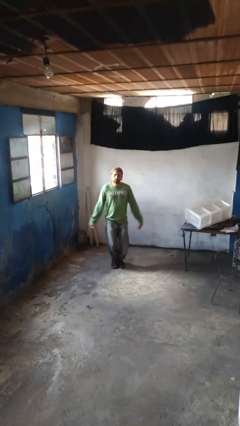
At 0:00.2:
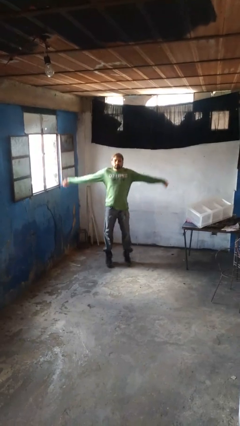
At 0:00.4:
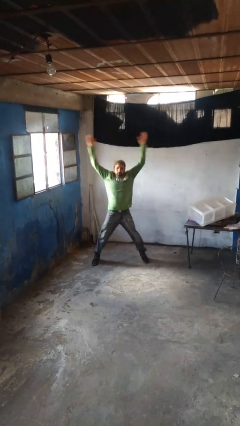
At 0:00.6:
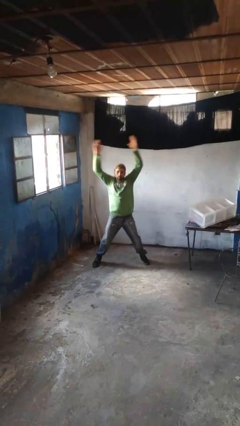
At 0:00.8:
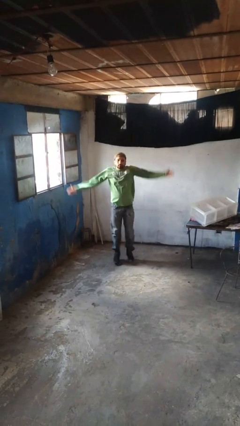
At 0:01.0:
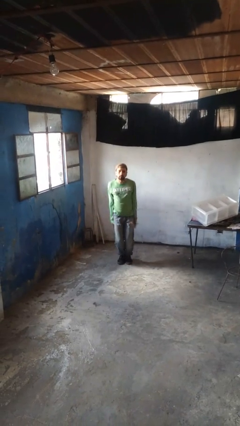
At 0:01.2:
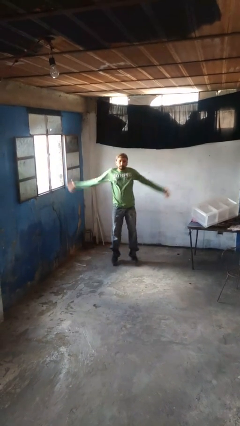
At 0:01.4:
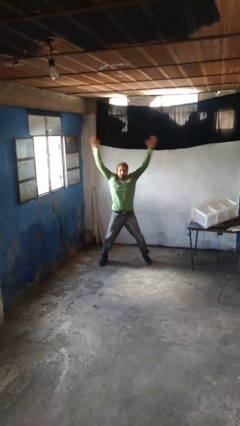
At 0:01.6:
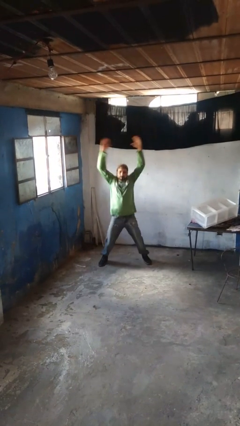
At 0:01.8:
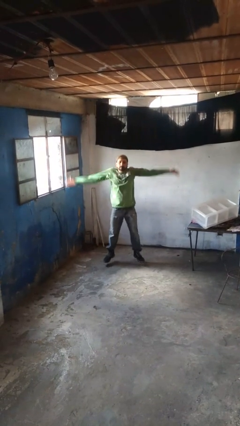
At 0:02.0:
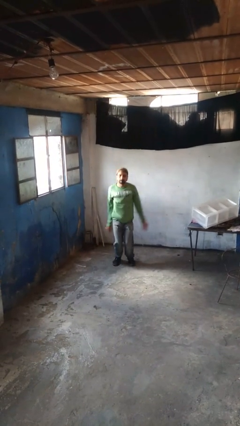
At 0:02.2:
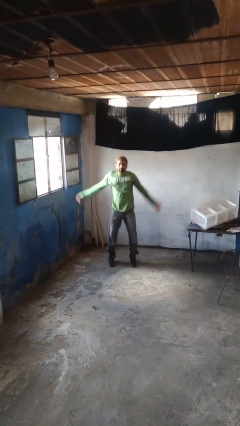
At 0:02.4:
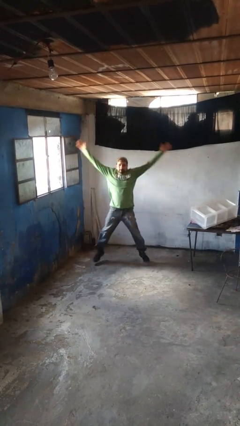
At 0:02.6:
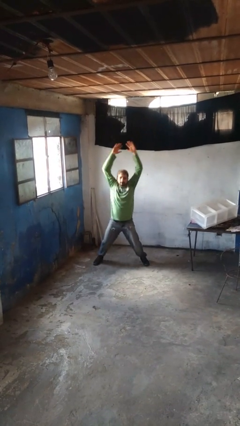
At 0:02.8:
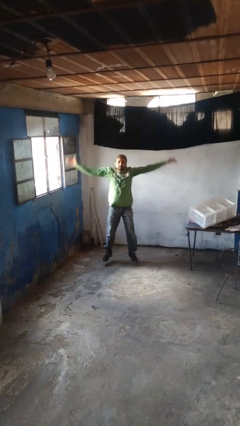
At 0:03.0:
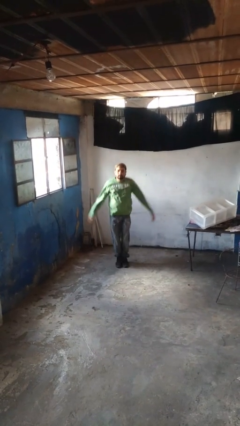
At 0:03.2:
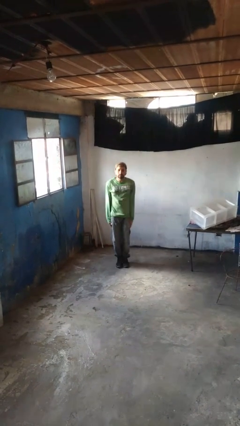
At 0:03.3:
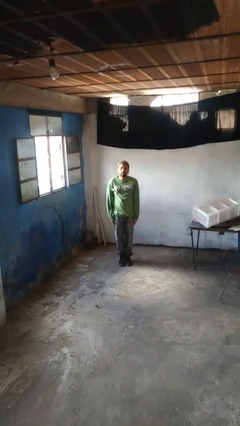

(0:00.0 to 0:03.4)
person exercises with jumping jacks

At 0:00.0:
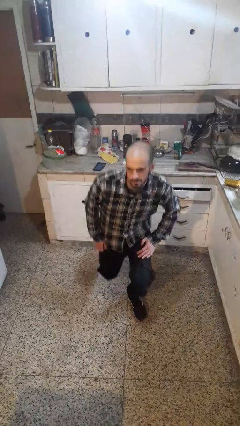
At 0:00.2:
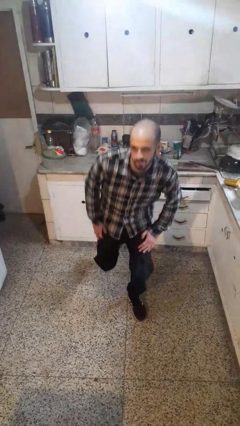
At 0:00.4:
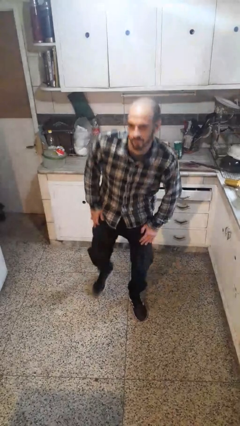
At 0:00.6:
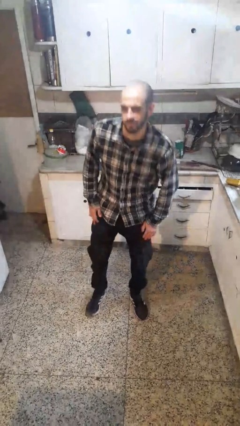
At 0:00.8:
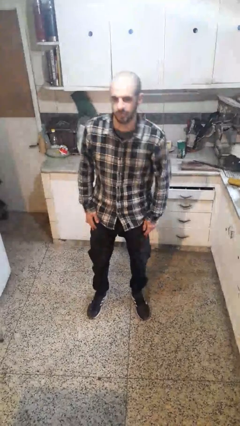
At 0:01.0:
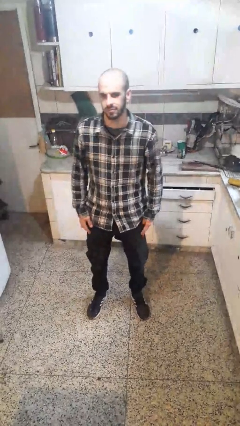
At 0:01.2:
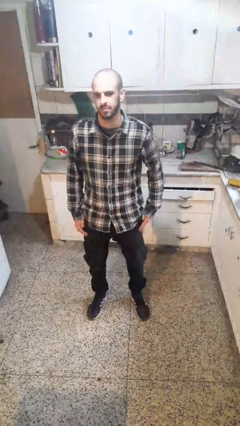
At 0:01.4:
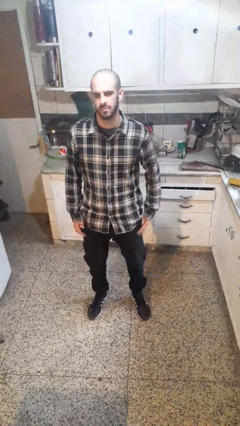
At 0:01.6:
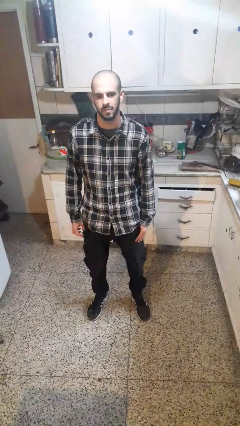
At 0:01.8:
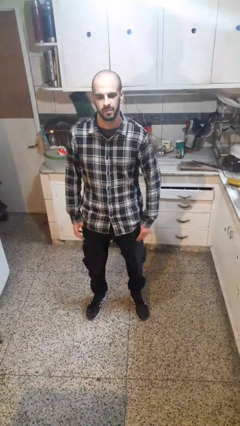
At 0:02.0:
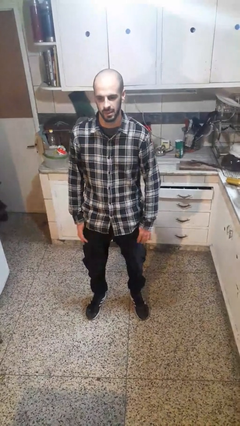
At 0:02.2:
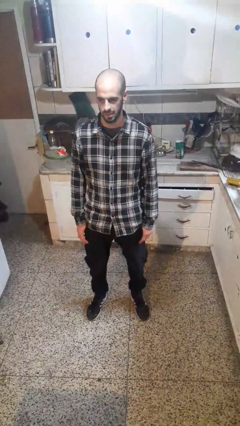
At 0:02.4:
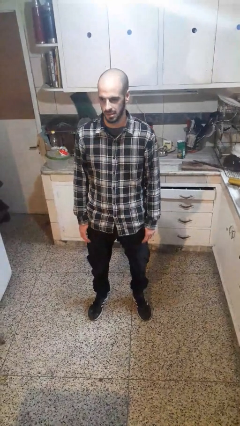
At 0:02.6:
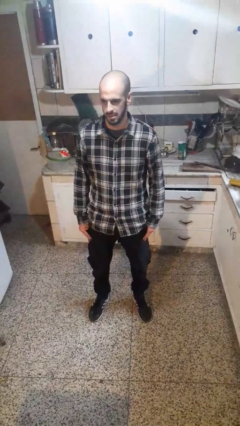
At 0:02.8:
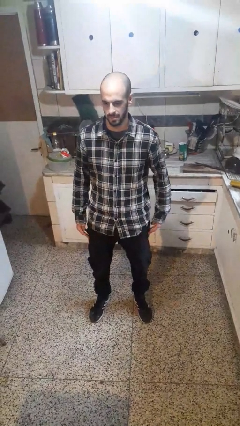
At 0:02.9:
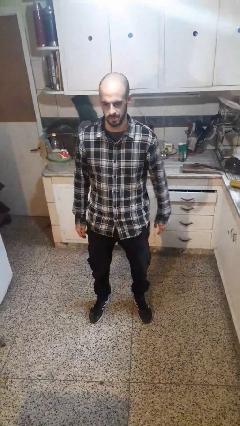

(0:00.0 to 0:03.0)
person stands up from floor

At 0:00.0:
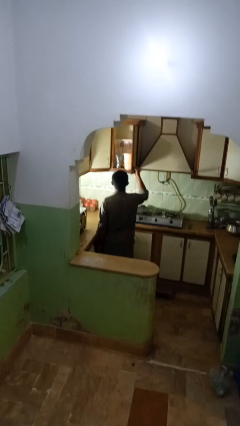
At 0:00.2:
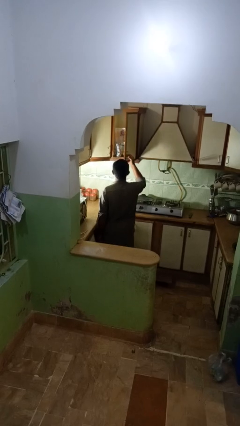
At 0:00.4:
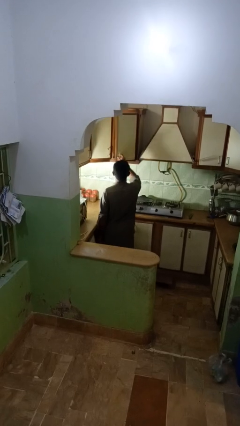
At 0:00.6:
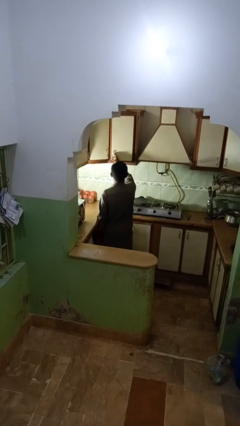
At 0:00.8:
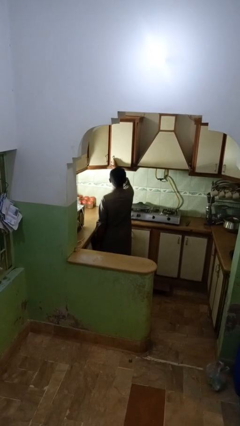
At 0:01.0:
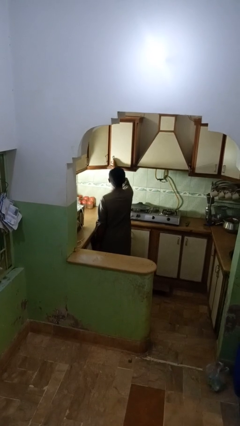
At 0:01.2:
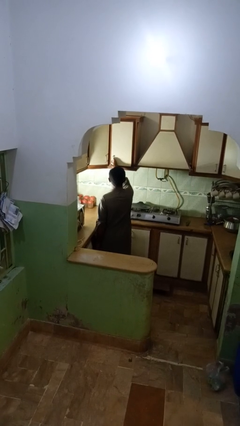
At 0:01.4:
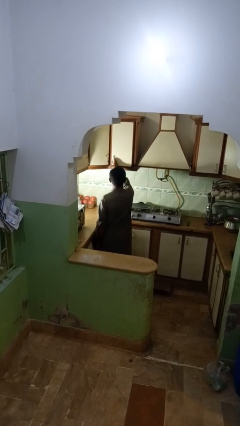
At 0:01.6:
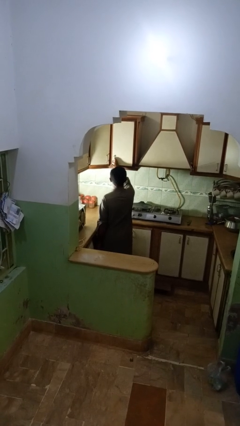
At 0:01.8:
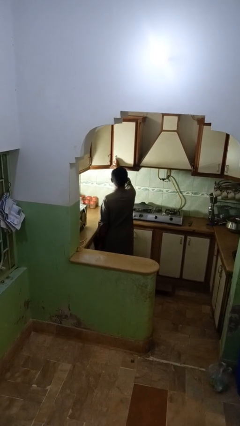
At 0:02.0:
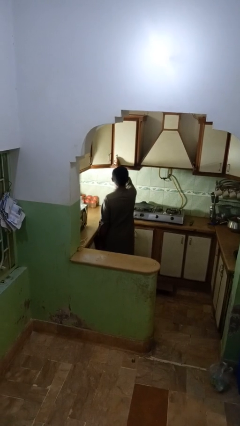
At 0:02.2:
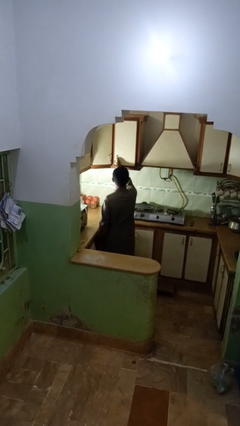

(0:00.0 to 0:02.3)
person closes kitchen drawer

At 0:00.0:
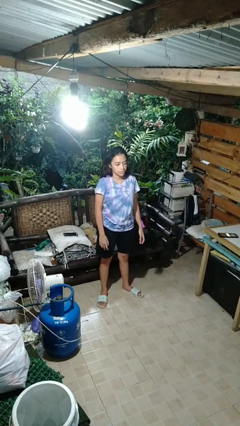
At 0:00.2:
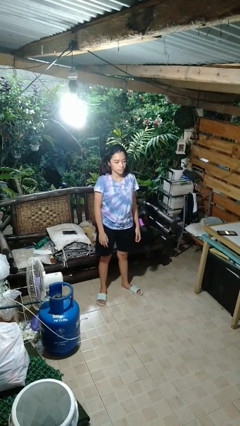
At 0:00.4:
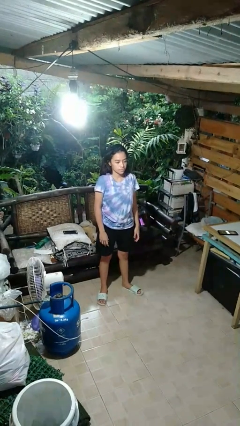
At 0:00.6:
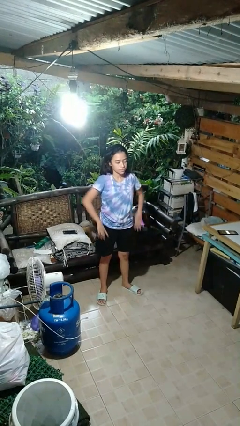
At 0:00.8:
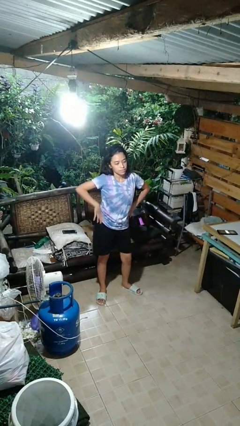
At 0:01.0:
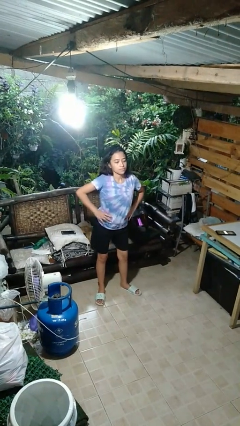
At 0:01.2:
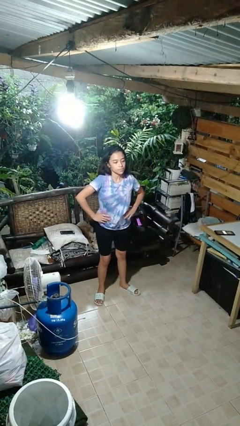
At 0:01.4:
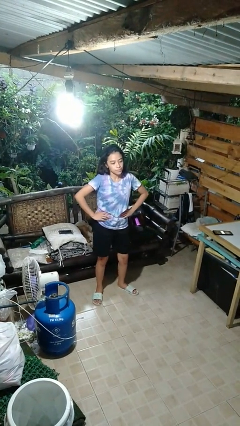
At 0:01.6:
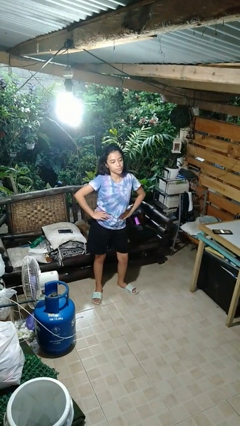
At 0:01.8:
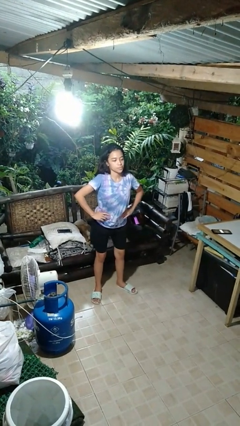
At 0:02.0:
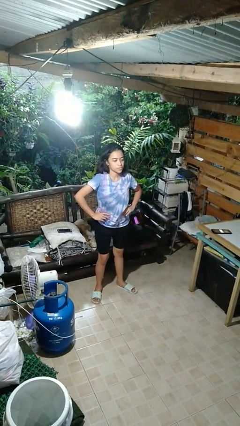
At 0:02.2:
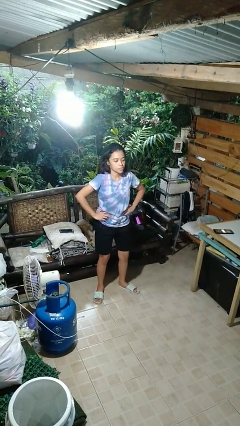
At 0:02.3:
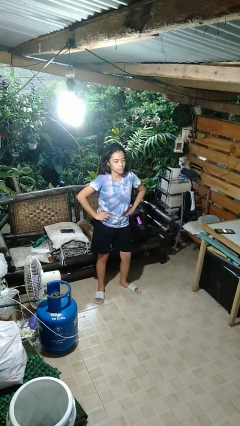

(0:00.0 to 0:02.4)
person wiggles hips

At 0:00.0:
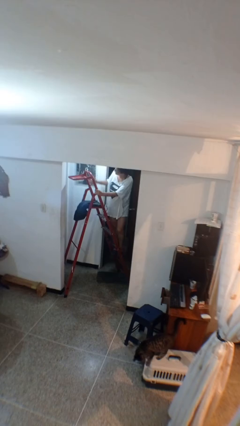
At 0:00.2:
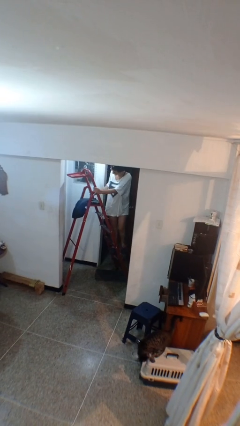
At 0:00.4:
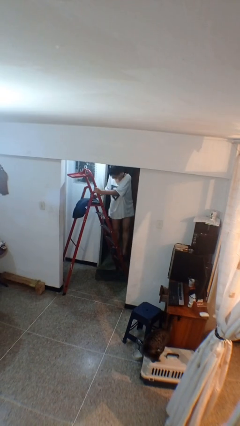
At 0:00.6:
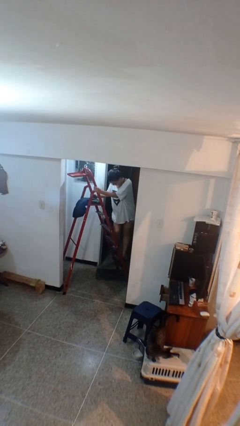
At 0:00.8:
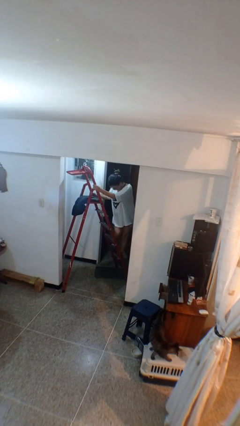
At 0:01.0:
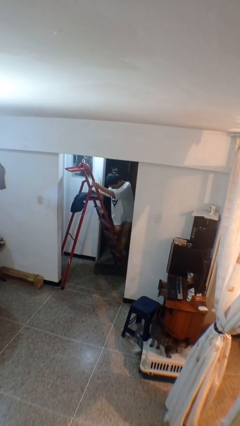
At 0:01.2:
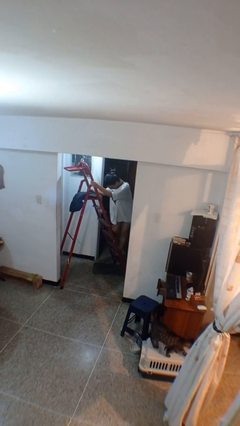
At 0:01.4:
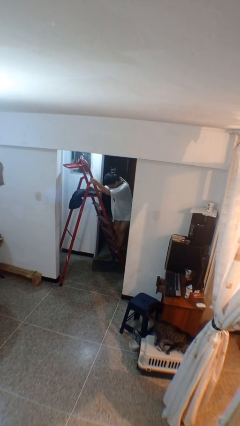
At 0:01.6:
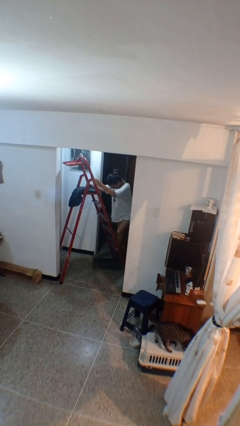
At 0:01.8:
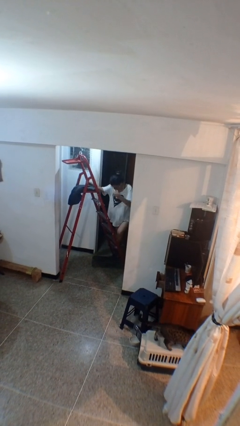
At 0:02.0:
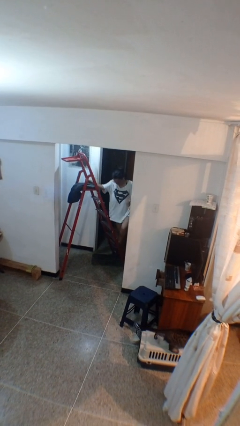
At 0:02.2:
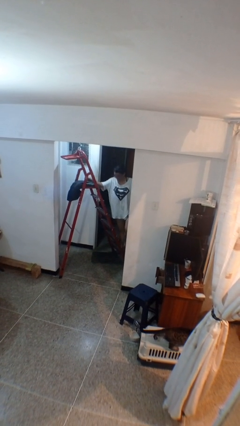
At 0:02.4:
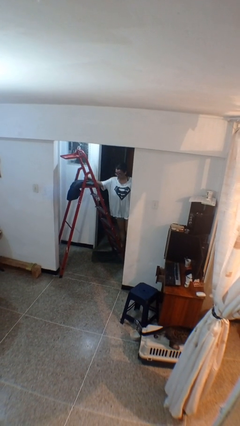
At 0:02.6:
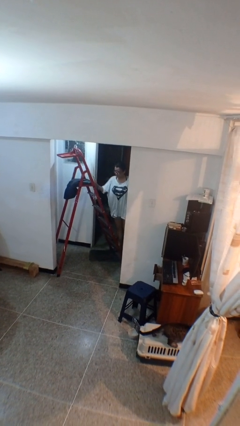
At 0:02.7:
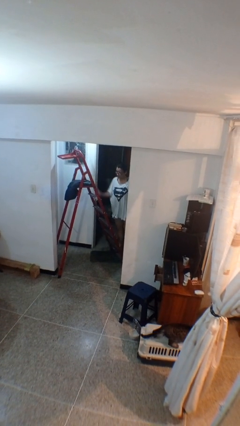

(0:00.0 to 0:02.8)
person climbs down ladder

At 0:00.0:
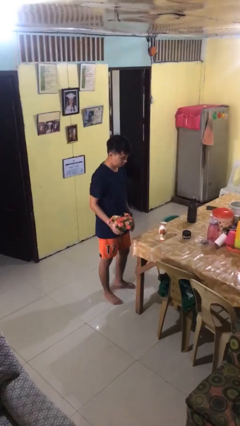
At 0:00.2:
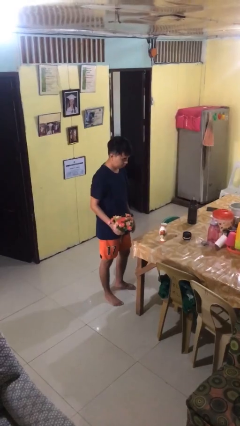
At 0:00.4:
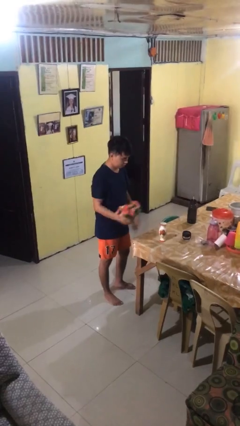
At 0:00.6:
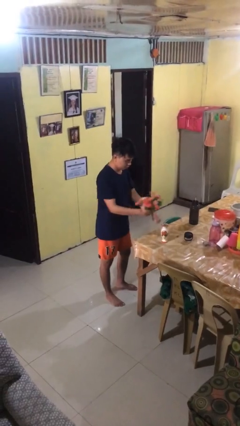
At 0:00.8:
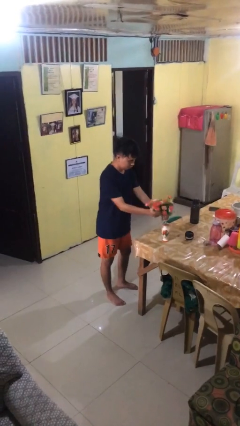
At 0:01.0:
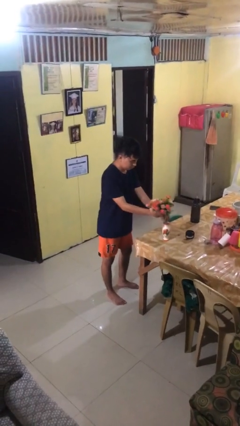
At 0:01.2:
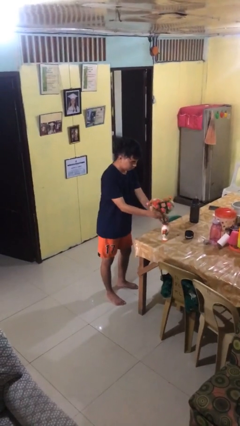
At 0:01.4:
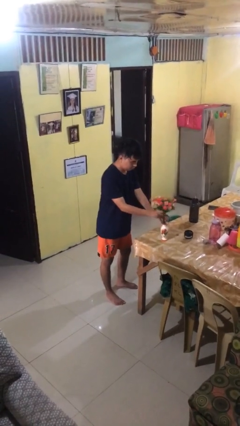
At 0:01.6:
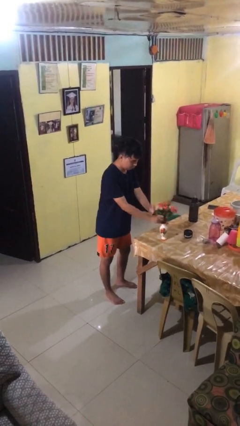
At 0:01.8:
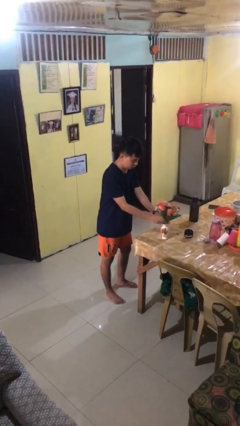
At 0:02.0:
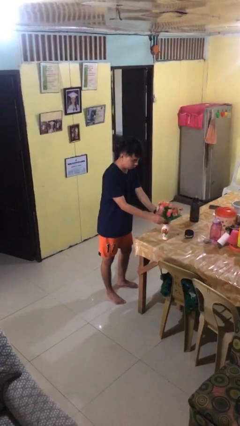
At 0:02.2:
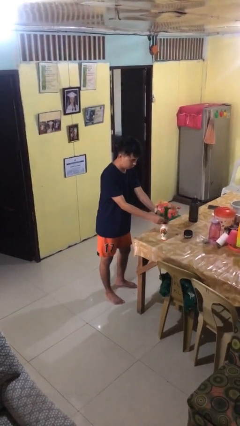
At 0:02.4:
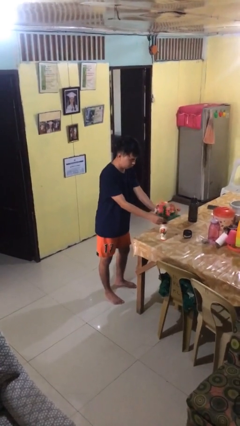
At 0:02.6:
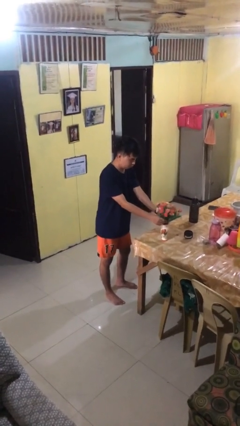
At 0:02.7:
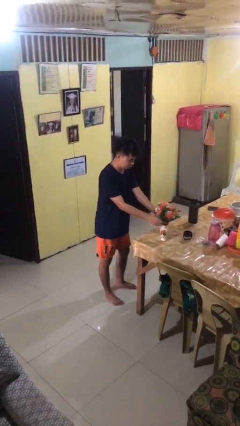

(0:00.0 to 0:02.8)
person arranges flowers in vase

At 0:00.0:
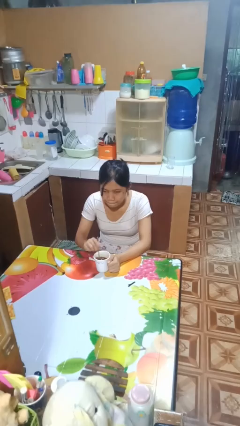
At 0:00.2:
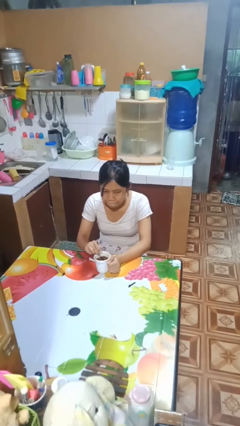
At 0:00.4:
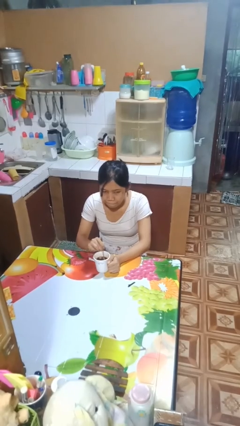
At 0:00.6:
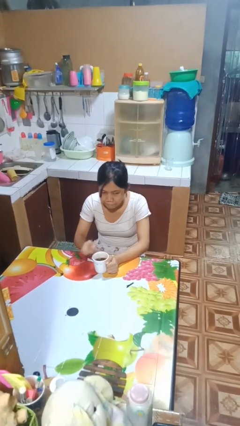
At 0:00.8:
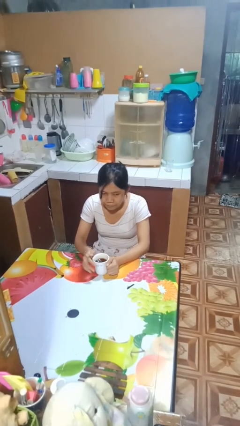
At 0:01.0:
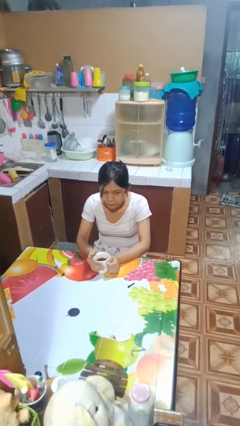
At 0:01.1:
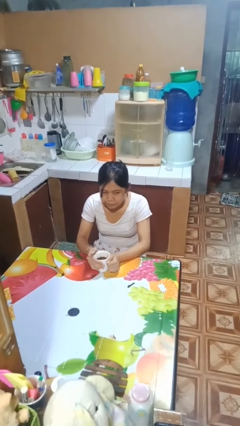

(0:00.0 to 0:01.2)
person stirs mug
